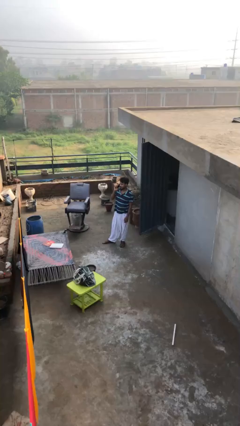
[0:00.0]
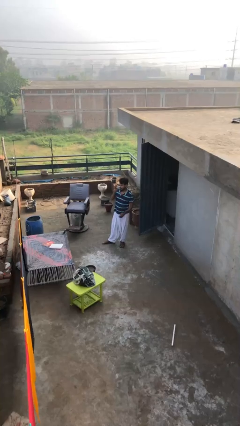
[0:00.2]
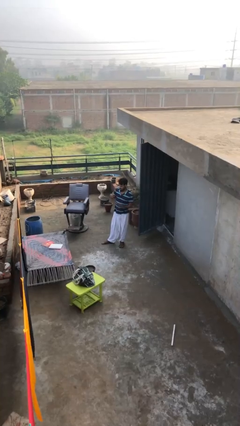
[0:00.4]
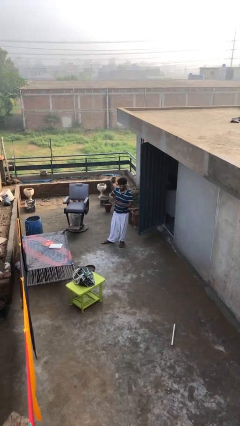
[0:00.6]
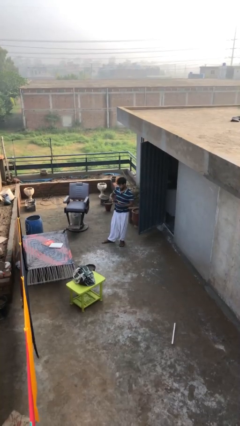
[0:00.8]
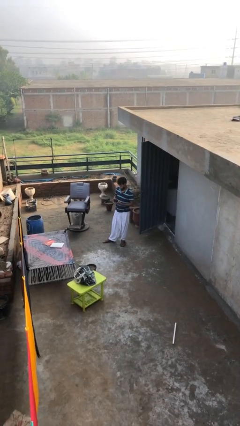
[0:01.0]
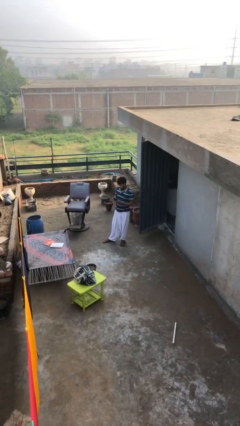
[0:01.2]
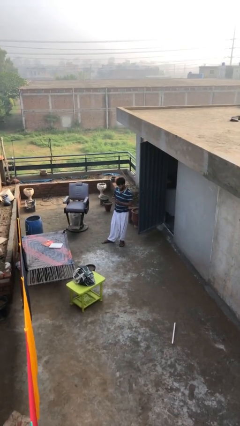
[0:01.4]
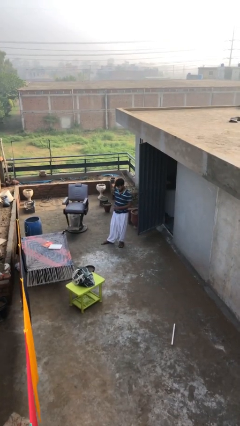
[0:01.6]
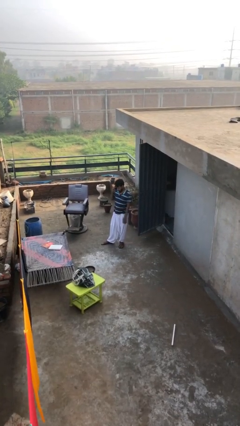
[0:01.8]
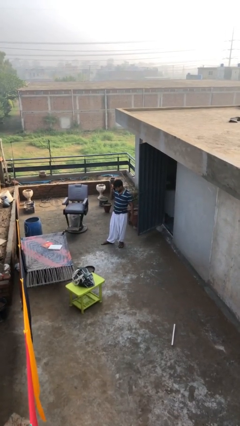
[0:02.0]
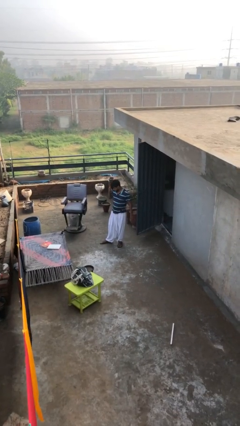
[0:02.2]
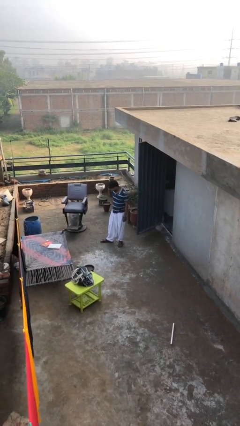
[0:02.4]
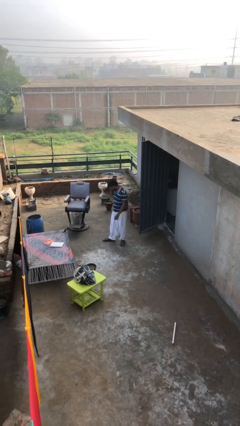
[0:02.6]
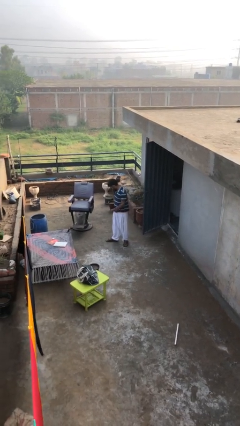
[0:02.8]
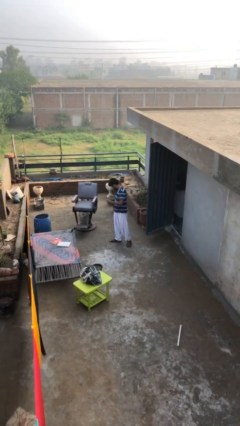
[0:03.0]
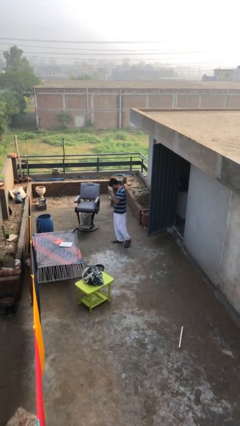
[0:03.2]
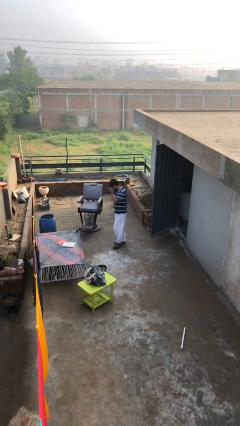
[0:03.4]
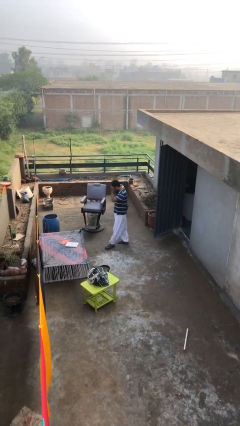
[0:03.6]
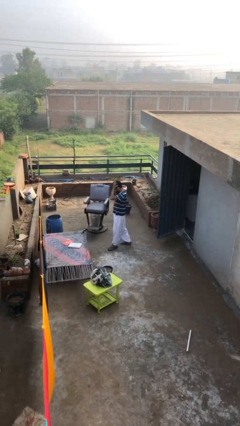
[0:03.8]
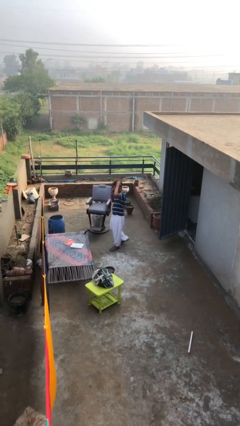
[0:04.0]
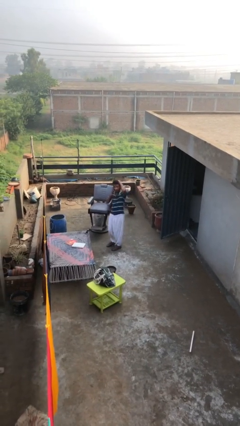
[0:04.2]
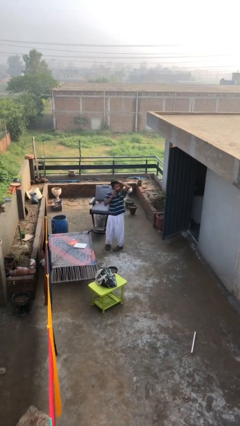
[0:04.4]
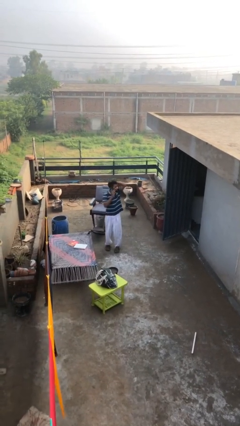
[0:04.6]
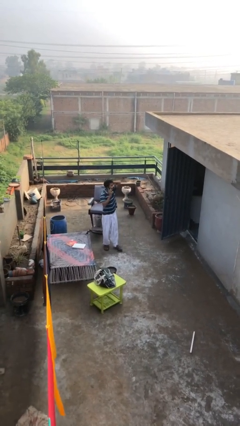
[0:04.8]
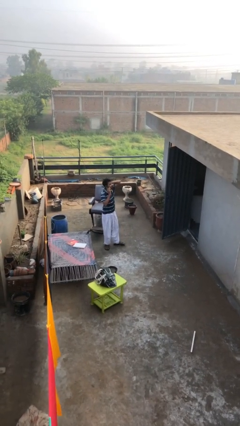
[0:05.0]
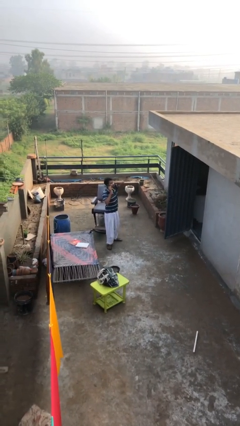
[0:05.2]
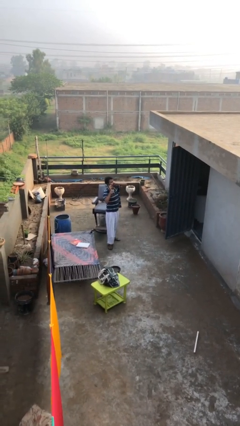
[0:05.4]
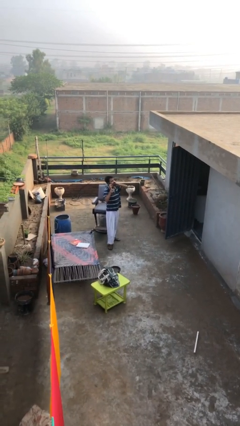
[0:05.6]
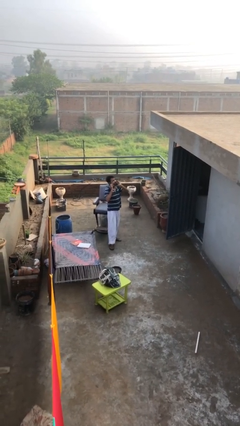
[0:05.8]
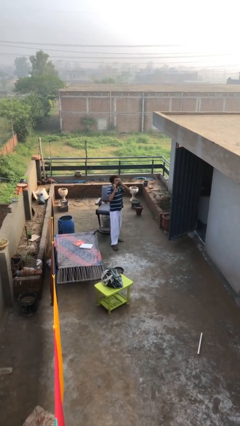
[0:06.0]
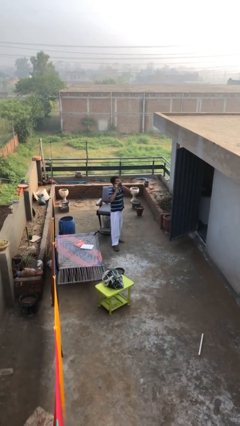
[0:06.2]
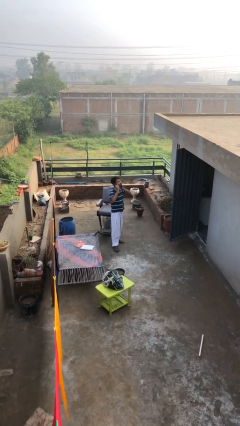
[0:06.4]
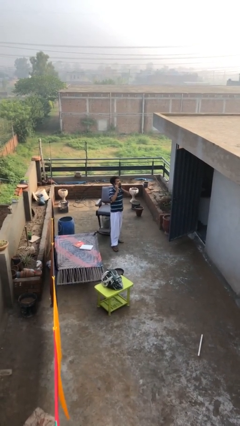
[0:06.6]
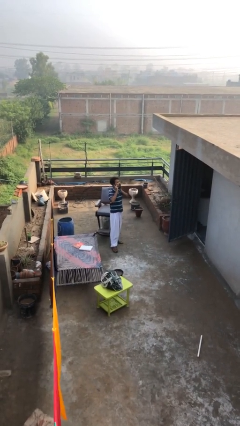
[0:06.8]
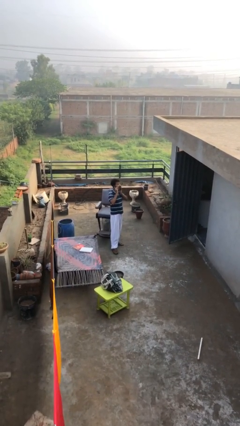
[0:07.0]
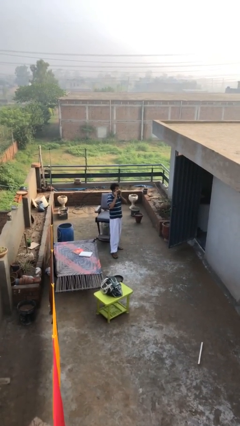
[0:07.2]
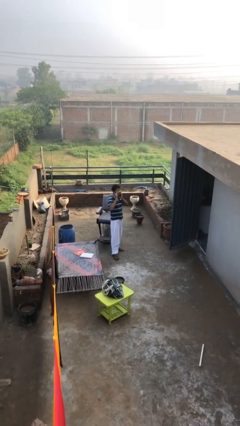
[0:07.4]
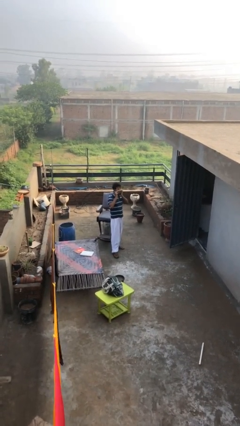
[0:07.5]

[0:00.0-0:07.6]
person talks on phone

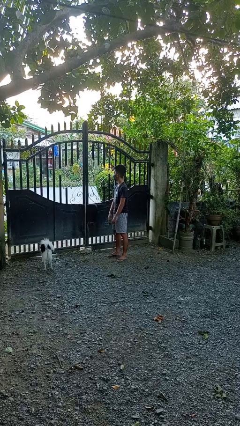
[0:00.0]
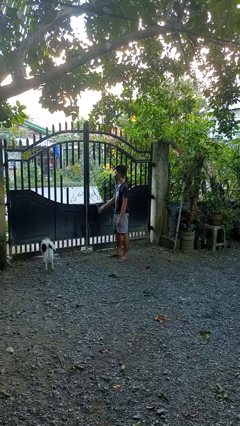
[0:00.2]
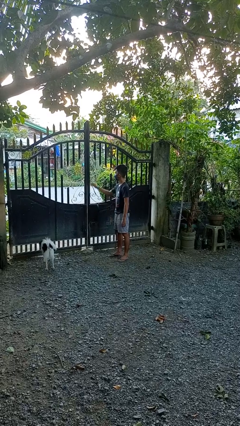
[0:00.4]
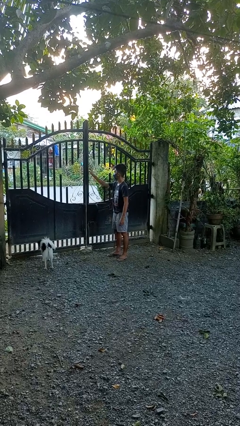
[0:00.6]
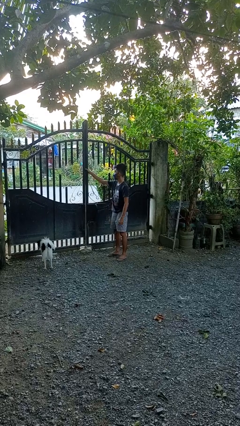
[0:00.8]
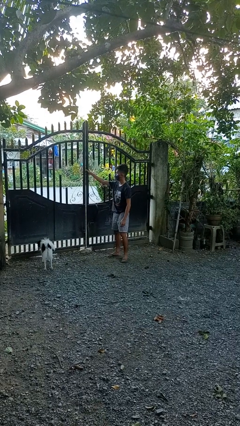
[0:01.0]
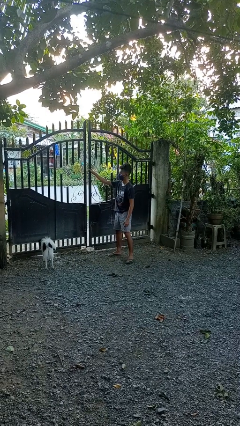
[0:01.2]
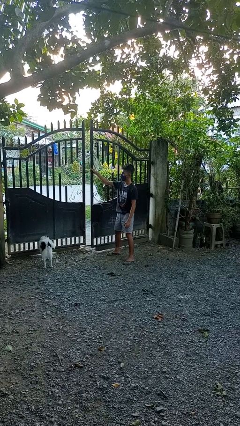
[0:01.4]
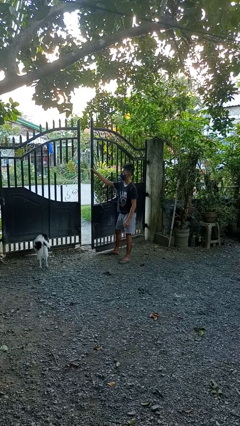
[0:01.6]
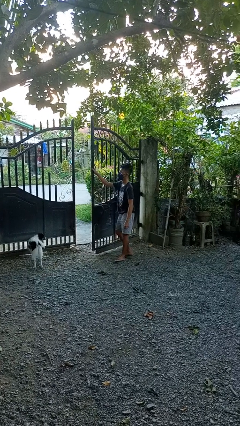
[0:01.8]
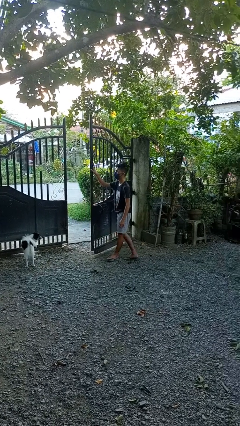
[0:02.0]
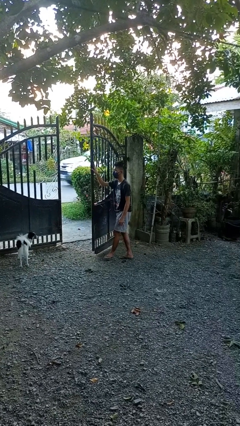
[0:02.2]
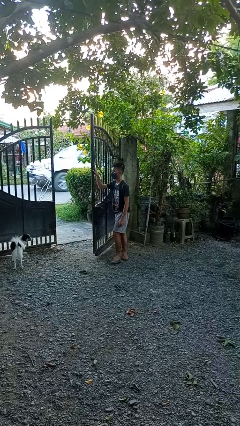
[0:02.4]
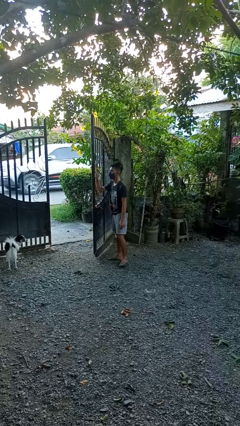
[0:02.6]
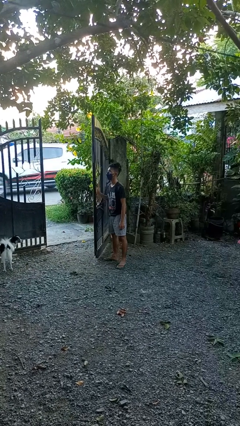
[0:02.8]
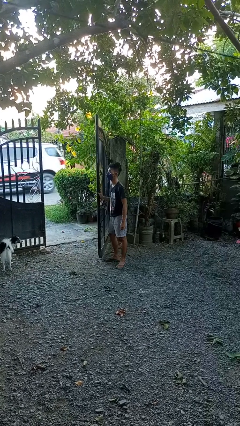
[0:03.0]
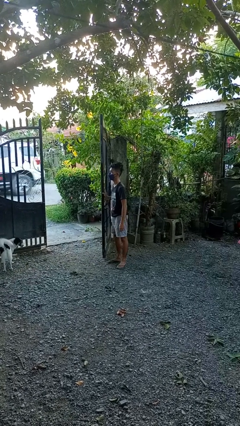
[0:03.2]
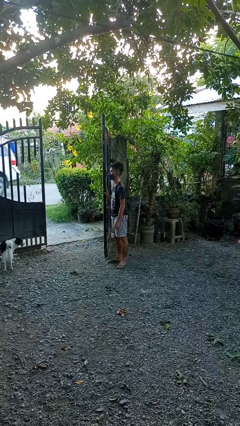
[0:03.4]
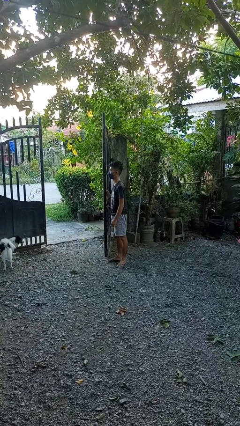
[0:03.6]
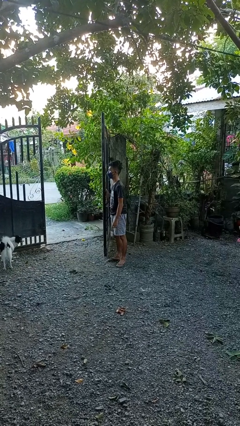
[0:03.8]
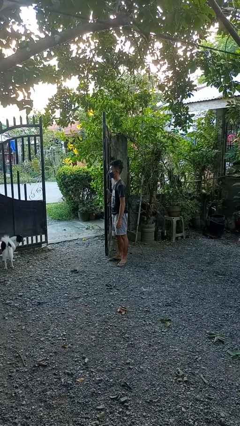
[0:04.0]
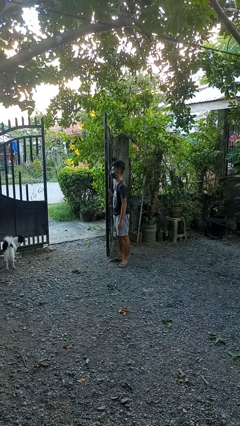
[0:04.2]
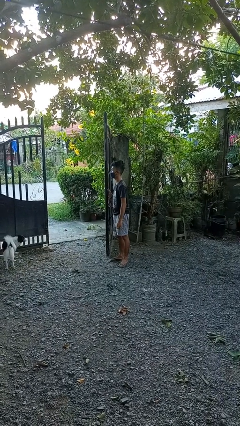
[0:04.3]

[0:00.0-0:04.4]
person opens gate

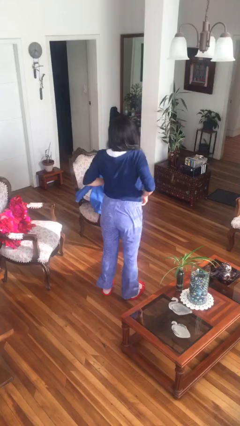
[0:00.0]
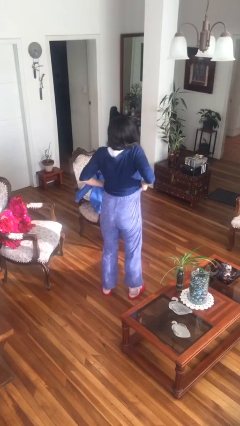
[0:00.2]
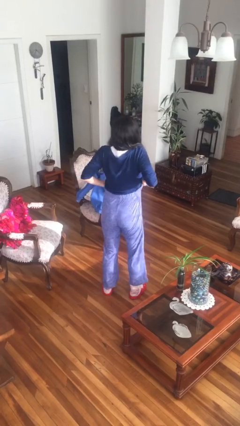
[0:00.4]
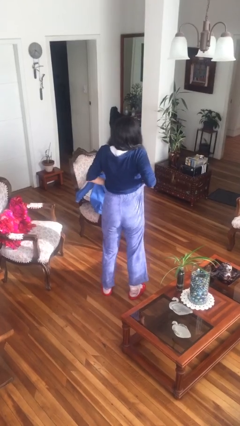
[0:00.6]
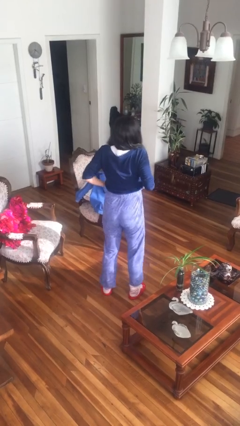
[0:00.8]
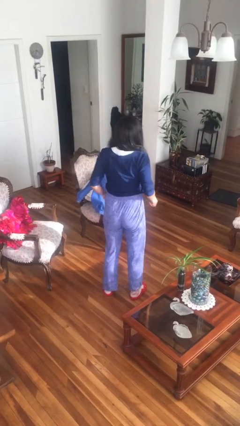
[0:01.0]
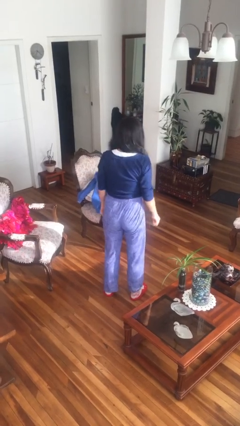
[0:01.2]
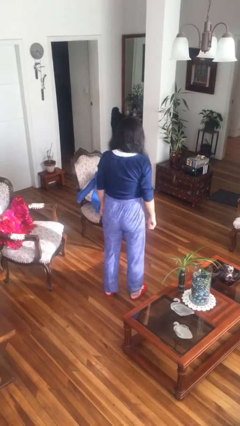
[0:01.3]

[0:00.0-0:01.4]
person hikes up pants

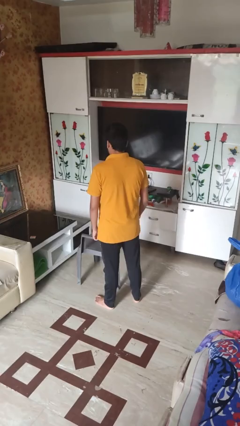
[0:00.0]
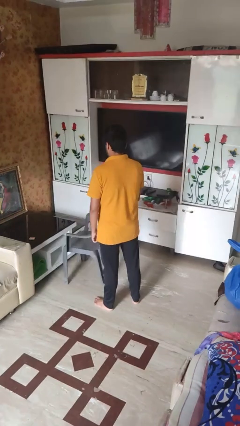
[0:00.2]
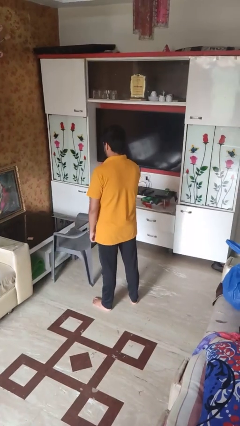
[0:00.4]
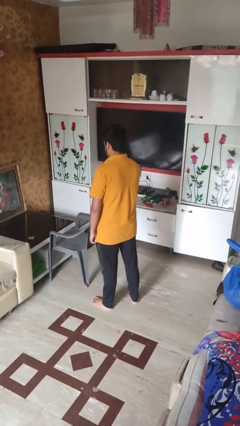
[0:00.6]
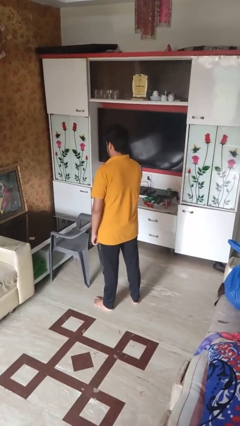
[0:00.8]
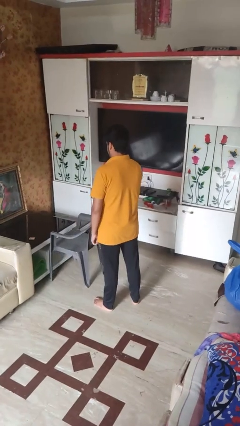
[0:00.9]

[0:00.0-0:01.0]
person pushes in chair

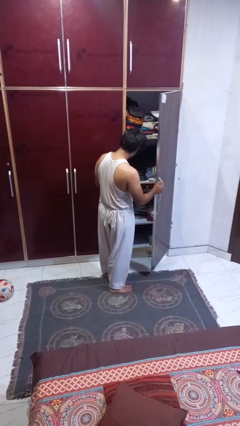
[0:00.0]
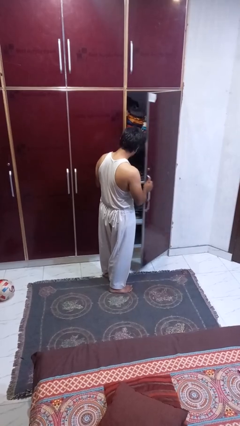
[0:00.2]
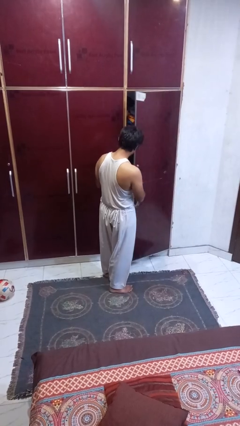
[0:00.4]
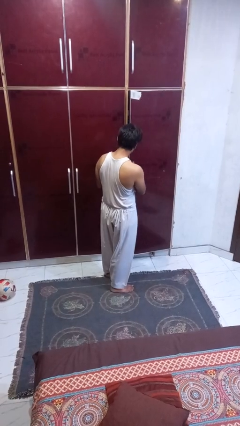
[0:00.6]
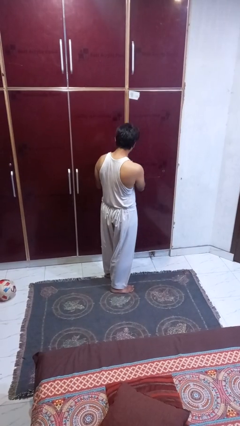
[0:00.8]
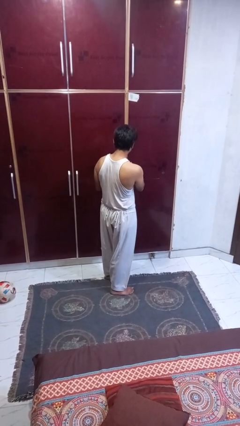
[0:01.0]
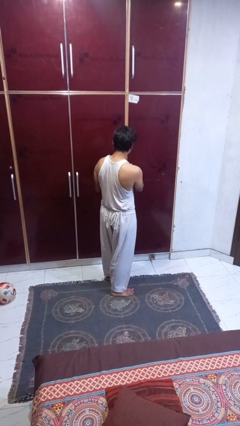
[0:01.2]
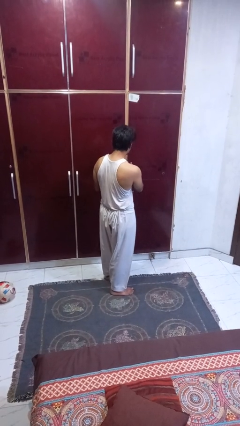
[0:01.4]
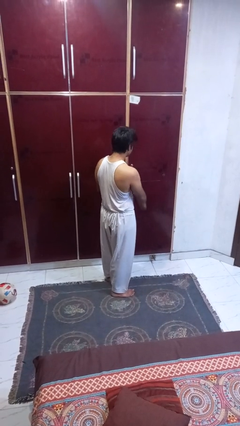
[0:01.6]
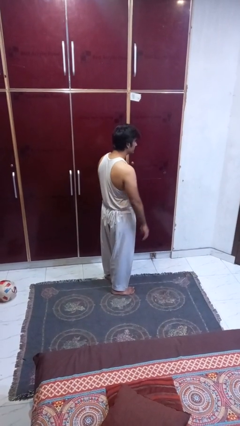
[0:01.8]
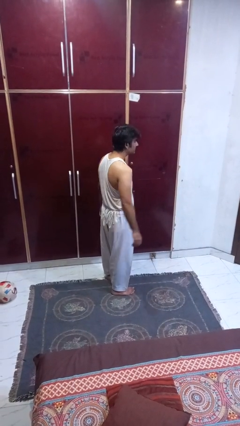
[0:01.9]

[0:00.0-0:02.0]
person closes closet door

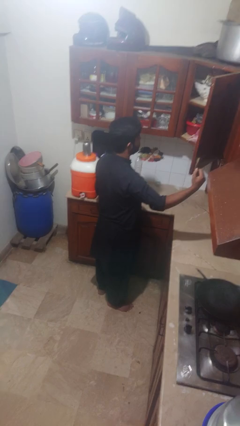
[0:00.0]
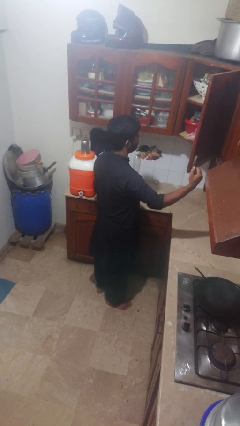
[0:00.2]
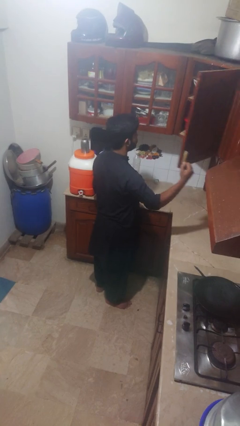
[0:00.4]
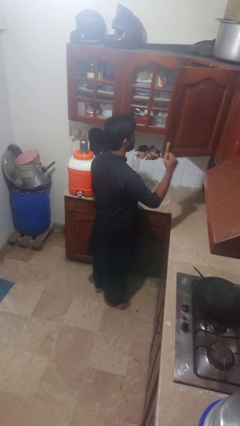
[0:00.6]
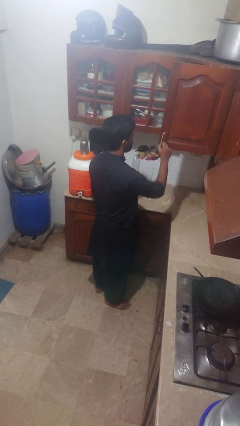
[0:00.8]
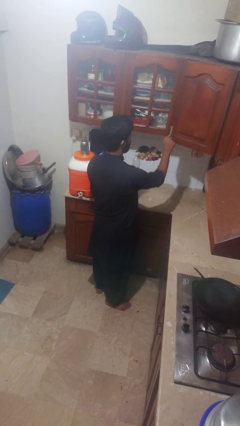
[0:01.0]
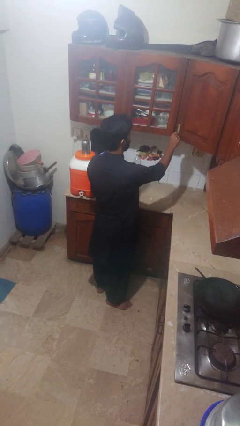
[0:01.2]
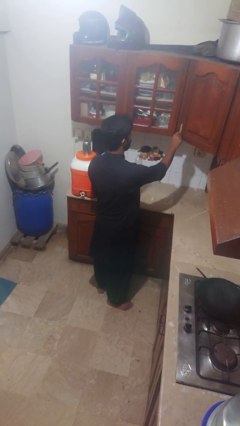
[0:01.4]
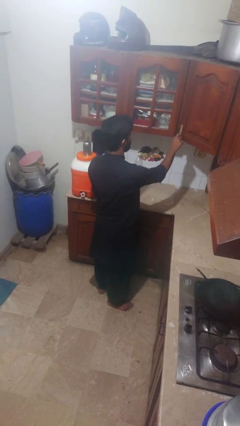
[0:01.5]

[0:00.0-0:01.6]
person closes cabinet
